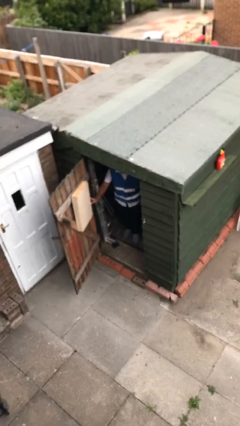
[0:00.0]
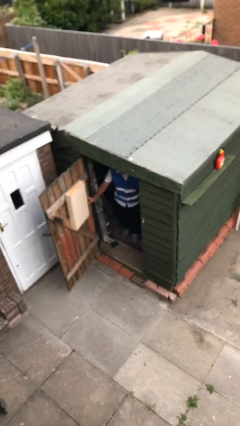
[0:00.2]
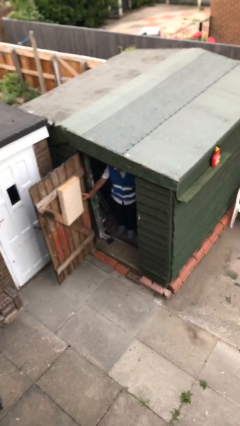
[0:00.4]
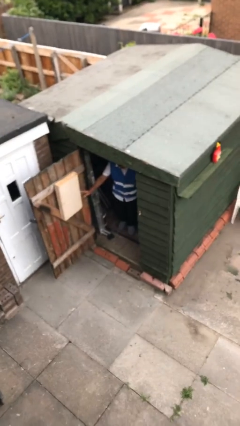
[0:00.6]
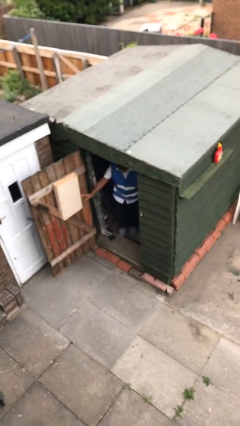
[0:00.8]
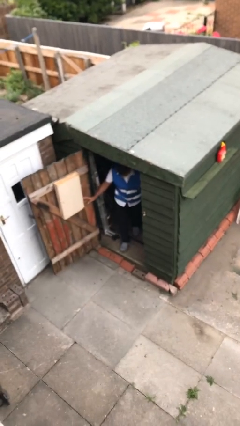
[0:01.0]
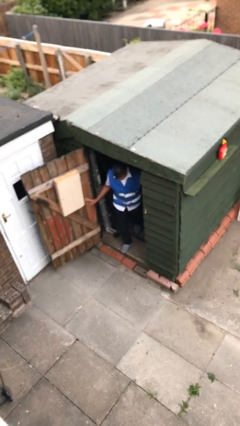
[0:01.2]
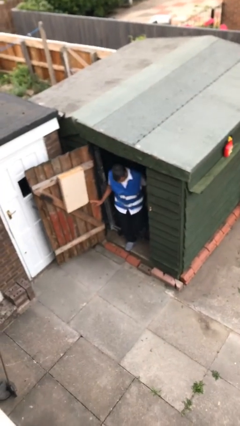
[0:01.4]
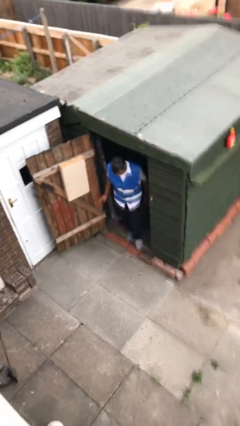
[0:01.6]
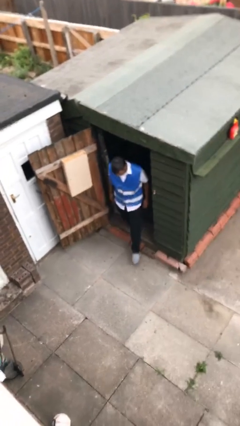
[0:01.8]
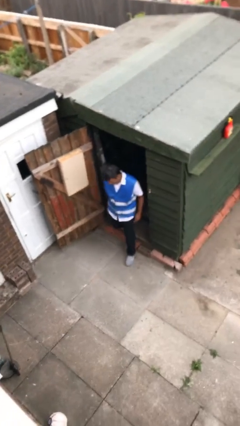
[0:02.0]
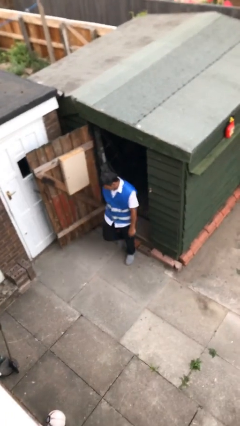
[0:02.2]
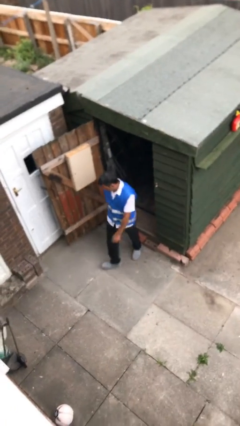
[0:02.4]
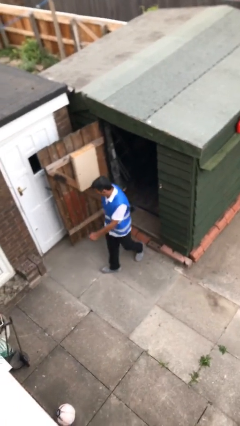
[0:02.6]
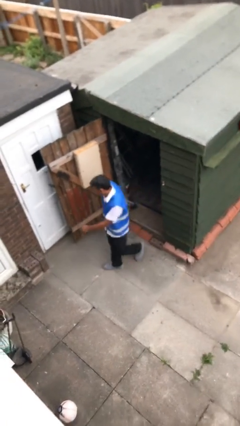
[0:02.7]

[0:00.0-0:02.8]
person enters scene through structure

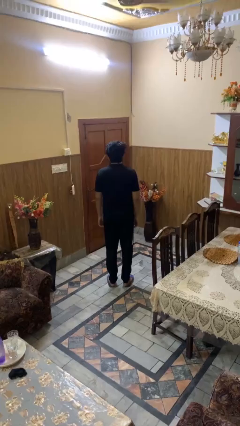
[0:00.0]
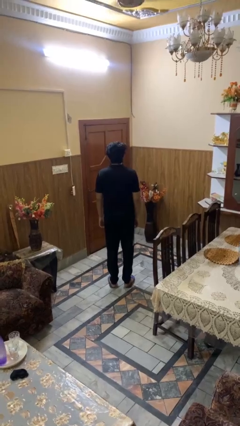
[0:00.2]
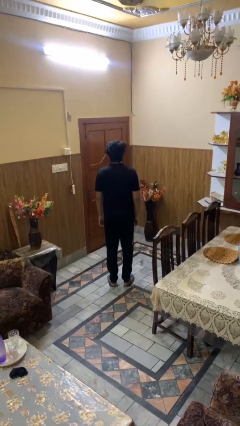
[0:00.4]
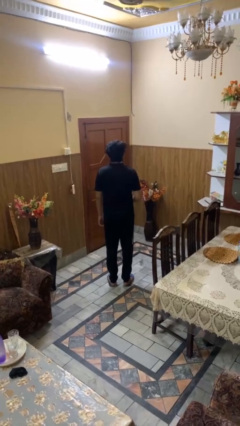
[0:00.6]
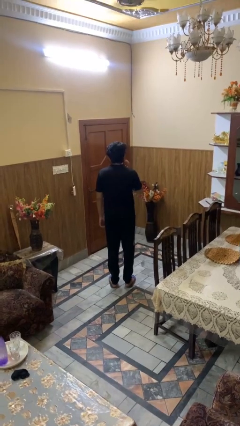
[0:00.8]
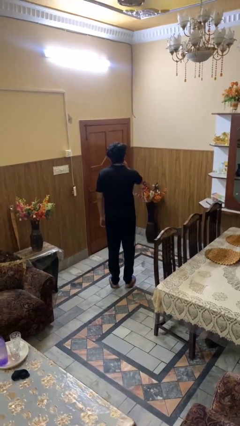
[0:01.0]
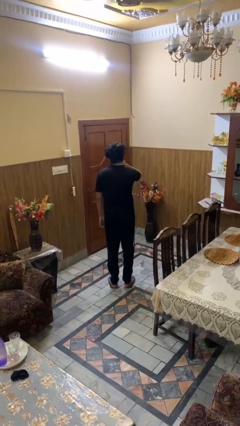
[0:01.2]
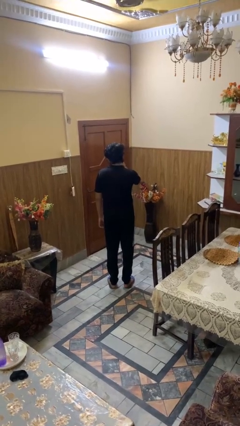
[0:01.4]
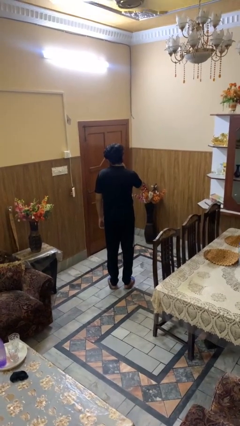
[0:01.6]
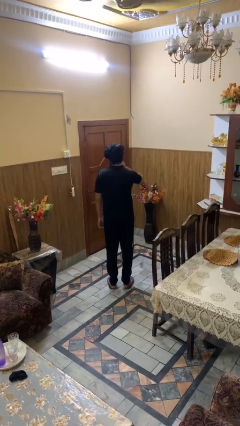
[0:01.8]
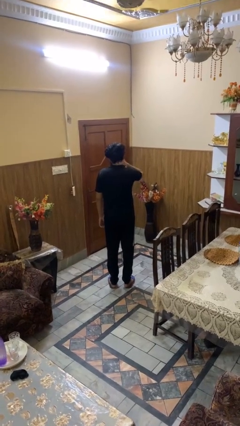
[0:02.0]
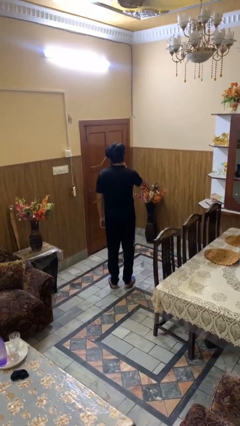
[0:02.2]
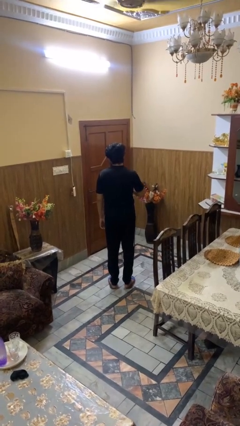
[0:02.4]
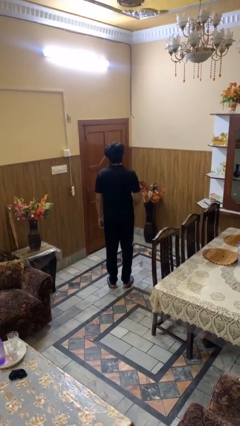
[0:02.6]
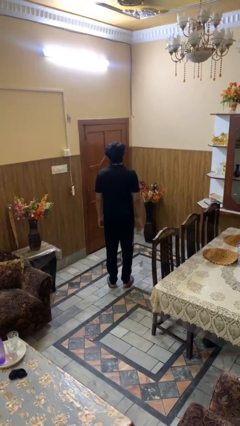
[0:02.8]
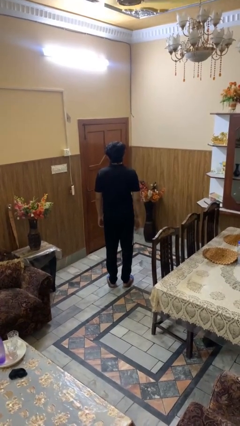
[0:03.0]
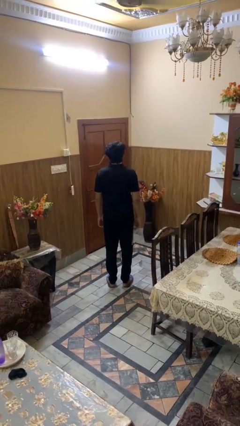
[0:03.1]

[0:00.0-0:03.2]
person rubs neck

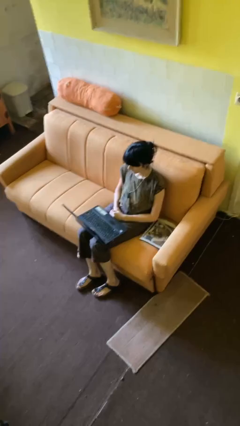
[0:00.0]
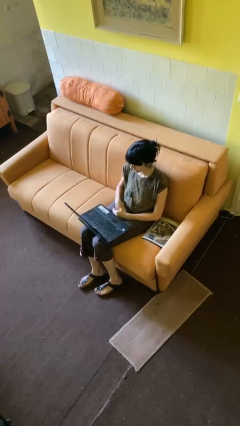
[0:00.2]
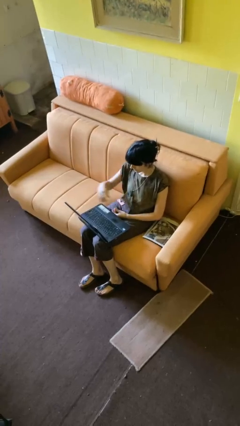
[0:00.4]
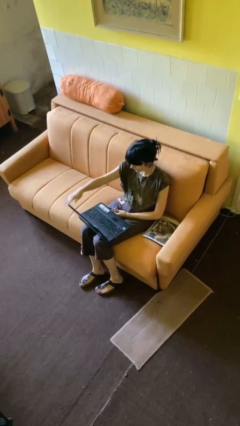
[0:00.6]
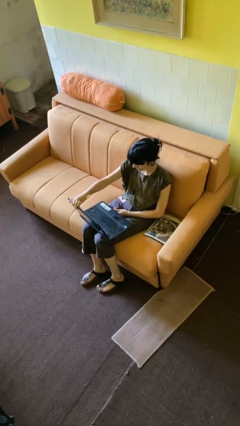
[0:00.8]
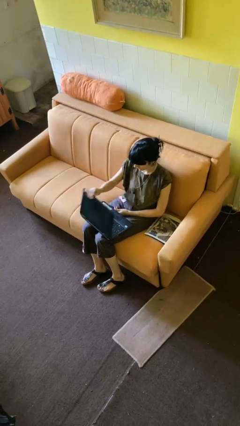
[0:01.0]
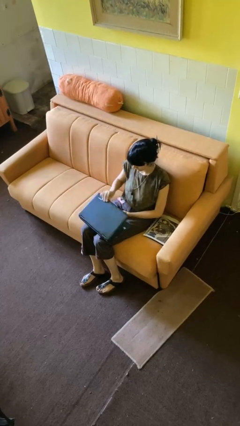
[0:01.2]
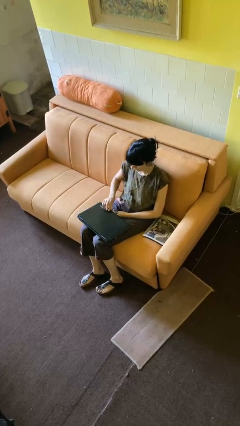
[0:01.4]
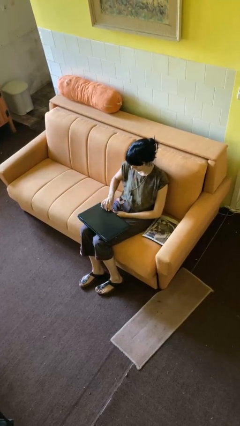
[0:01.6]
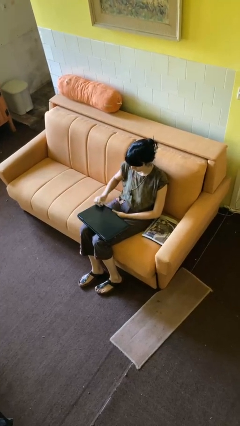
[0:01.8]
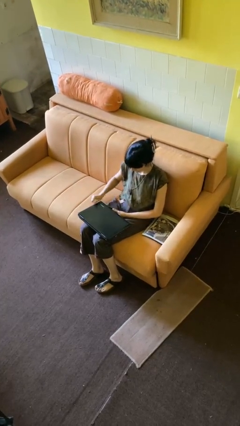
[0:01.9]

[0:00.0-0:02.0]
person closes laptop

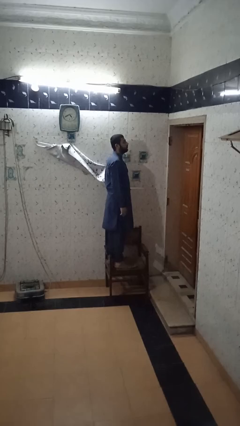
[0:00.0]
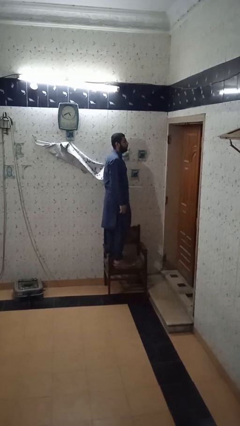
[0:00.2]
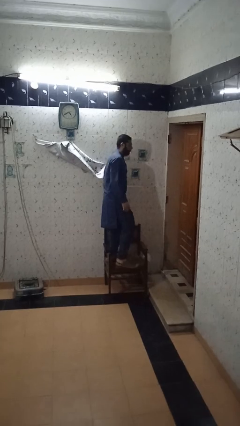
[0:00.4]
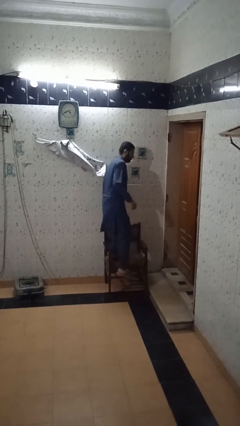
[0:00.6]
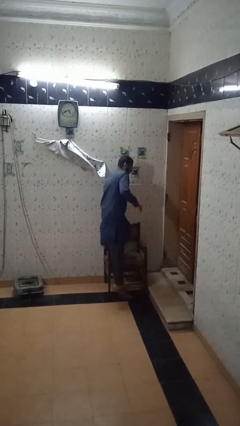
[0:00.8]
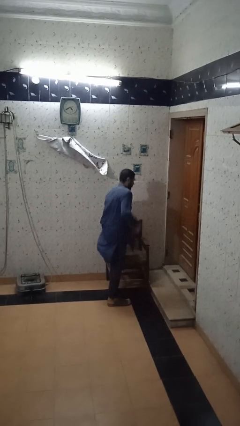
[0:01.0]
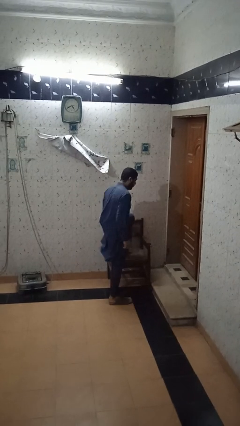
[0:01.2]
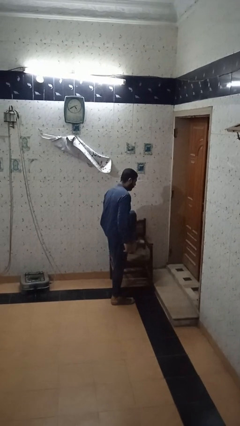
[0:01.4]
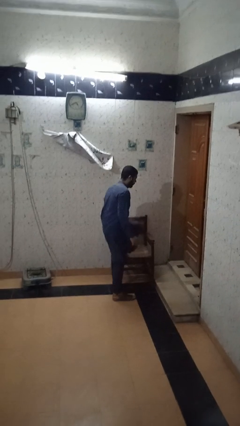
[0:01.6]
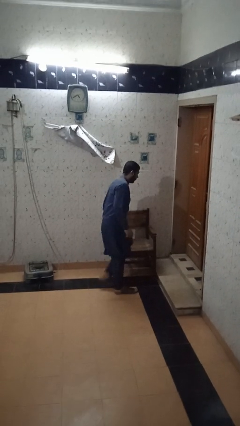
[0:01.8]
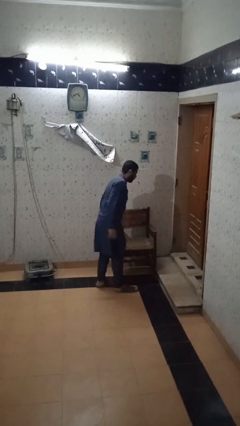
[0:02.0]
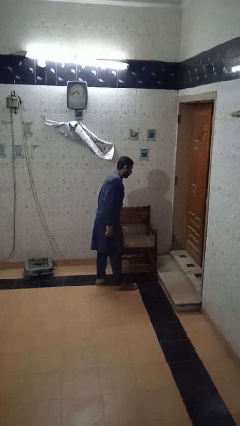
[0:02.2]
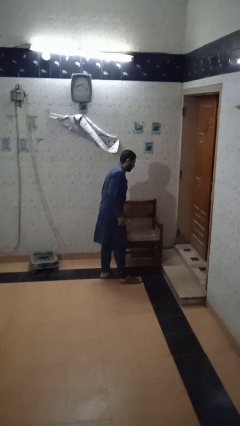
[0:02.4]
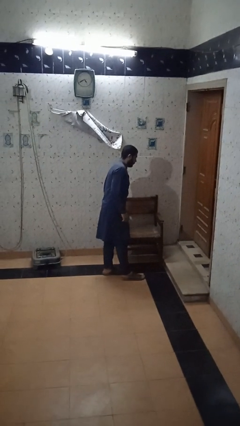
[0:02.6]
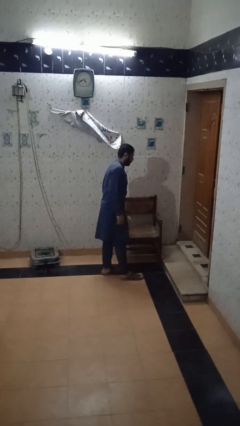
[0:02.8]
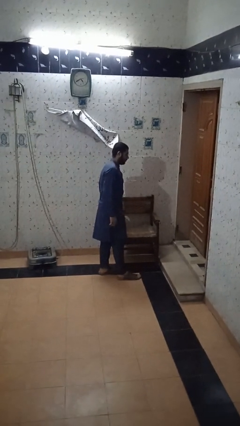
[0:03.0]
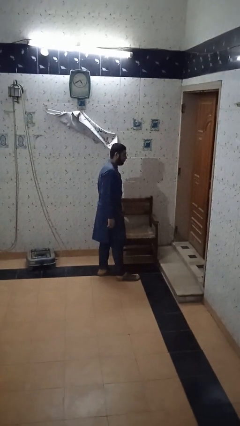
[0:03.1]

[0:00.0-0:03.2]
person climbs off chair

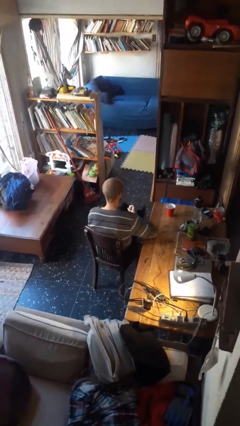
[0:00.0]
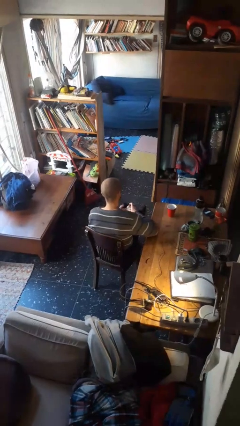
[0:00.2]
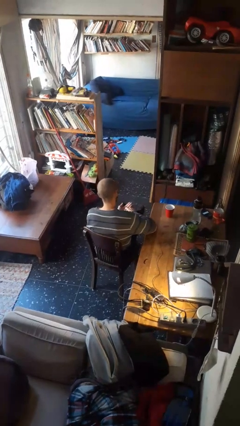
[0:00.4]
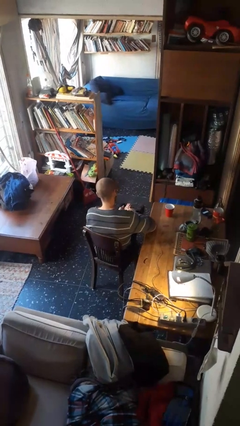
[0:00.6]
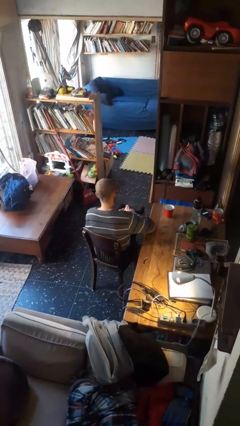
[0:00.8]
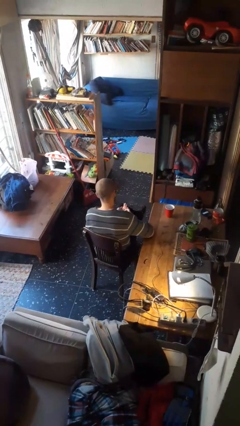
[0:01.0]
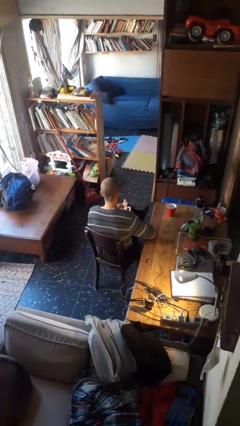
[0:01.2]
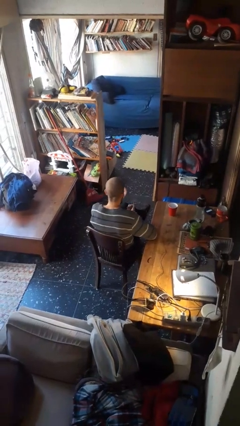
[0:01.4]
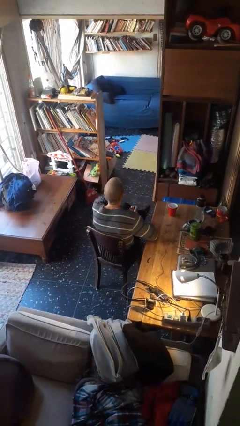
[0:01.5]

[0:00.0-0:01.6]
person takes medicine pills

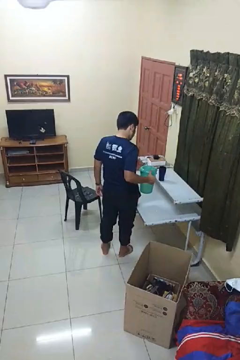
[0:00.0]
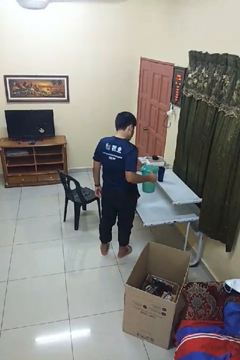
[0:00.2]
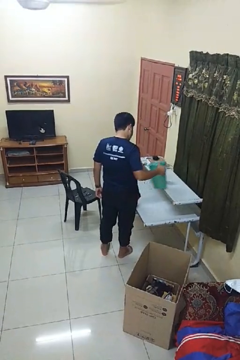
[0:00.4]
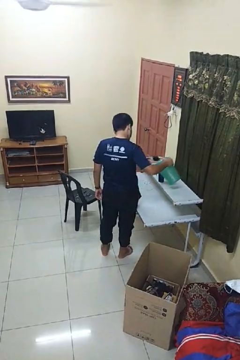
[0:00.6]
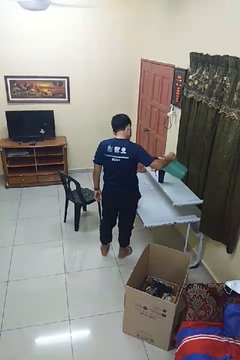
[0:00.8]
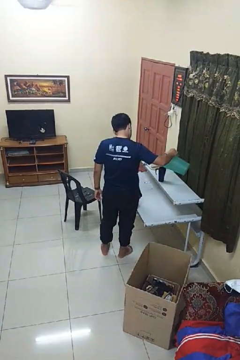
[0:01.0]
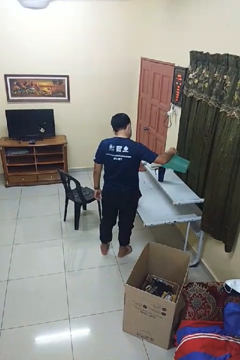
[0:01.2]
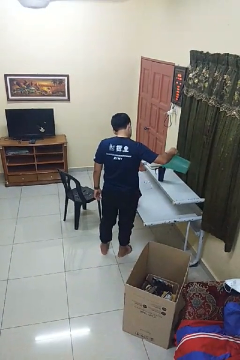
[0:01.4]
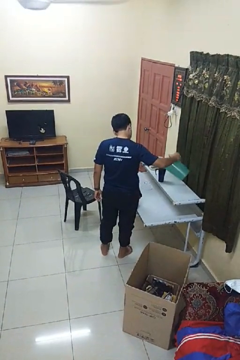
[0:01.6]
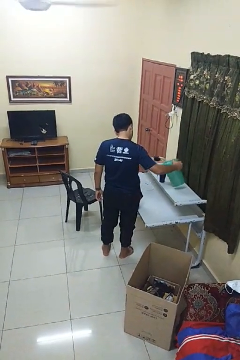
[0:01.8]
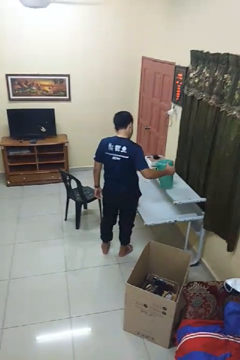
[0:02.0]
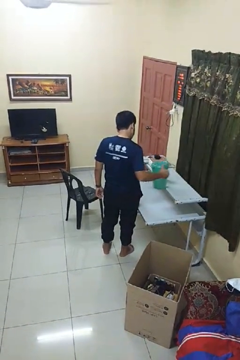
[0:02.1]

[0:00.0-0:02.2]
person pours coffee into mug

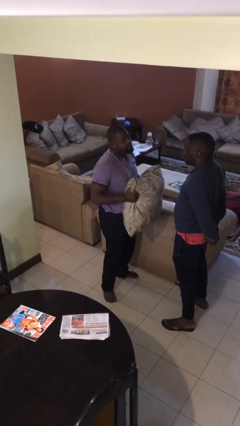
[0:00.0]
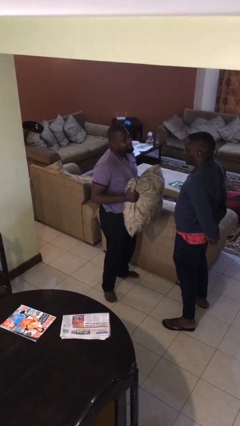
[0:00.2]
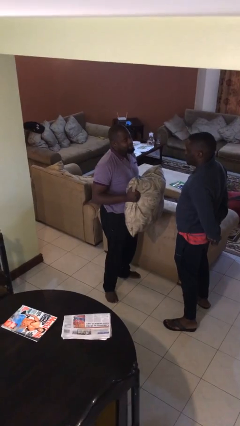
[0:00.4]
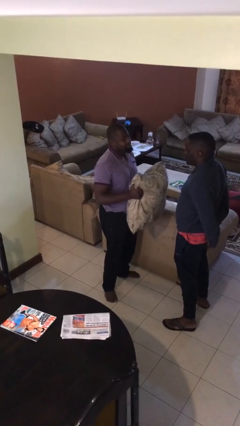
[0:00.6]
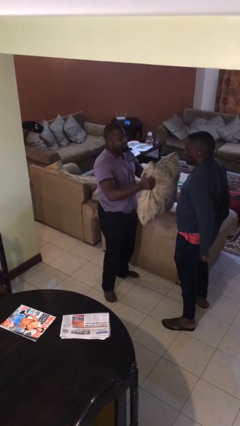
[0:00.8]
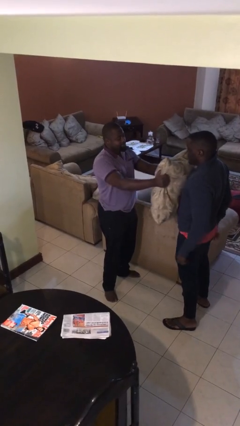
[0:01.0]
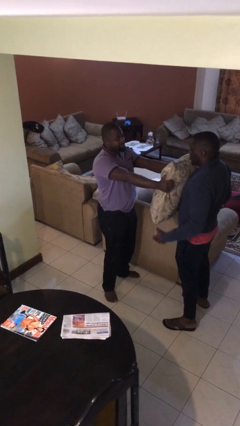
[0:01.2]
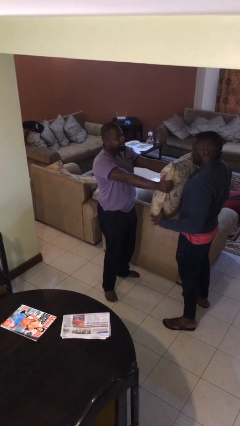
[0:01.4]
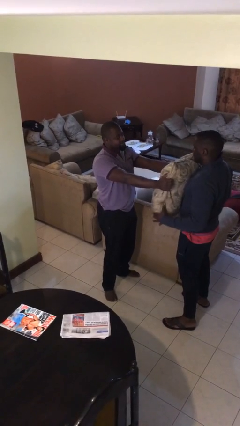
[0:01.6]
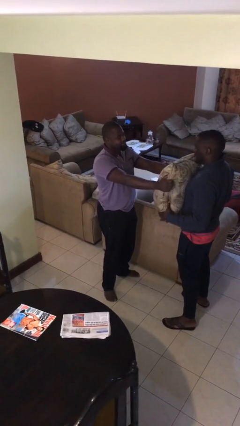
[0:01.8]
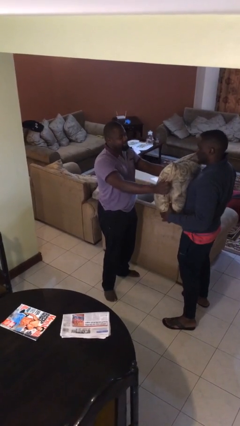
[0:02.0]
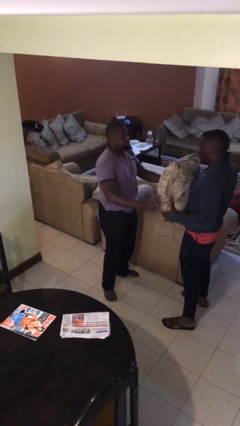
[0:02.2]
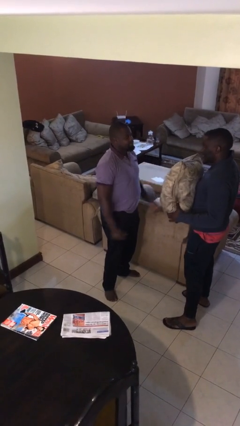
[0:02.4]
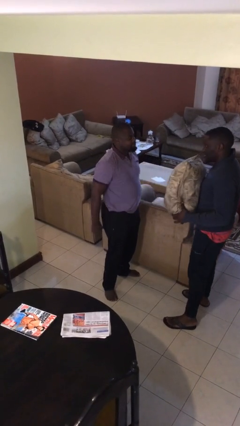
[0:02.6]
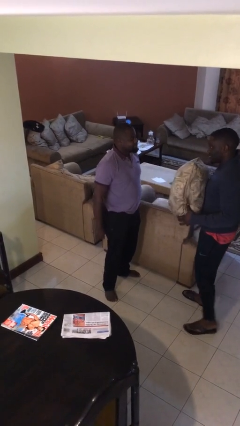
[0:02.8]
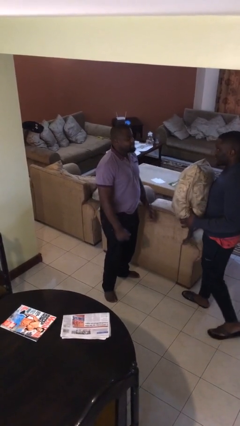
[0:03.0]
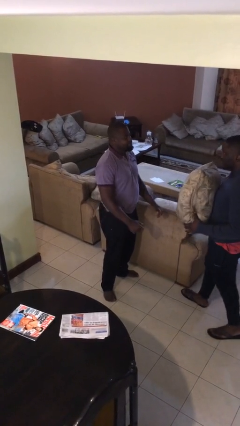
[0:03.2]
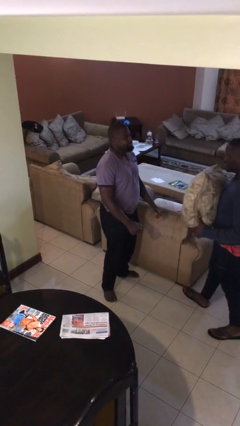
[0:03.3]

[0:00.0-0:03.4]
person transfers object to person
